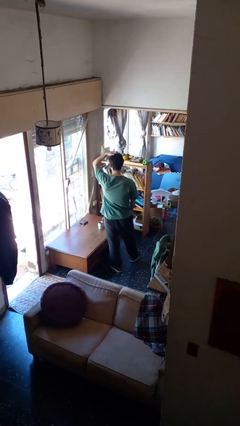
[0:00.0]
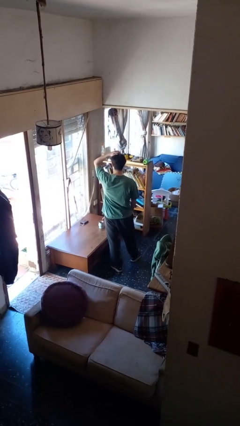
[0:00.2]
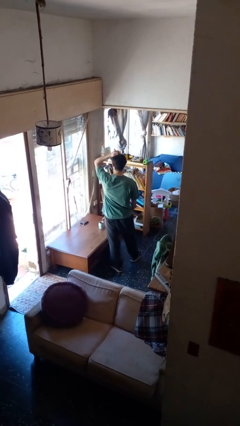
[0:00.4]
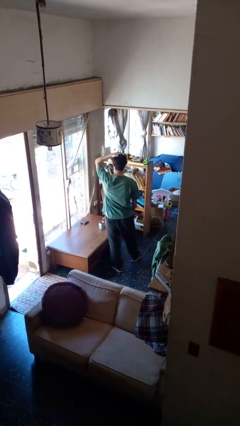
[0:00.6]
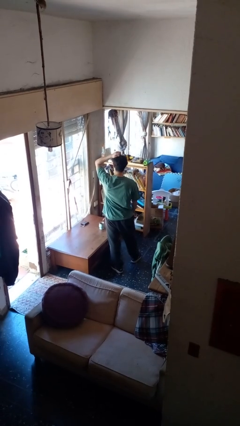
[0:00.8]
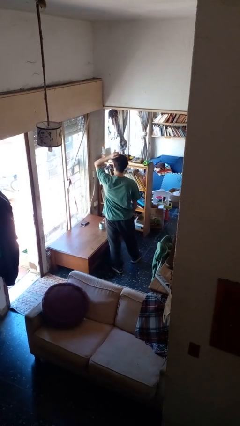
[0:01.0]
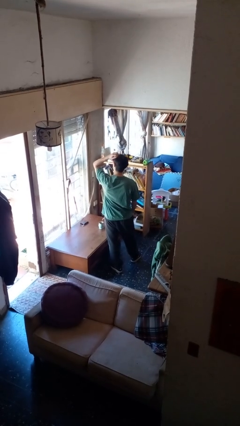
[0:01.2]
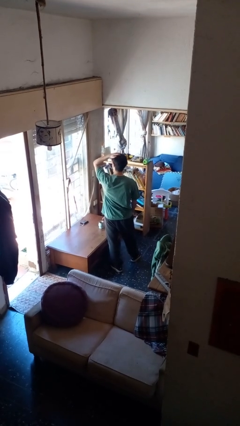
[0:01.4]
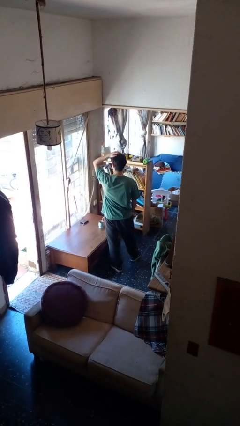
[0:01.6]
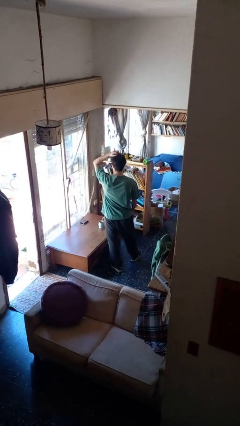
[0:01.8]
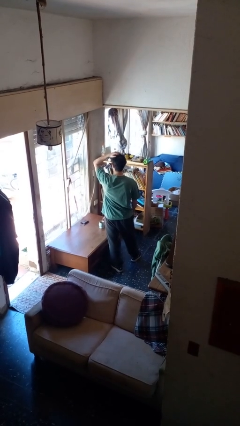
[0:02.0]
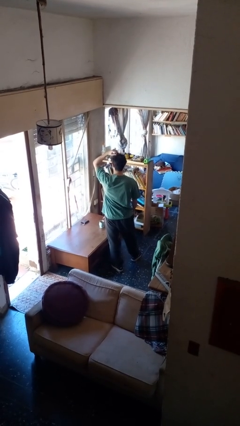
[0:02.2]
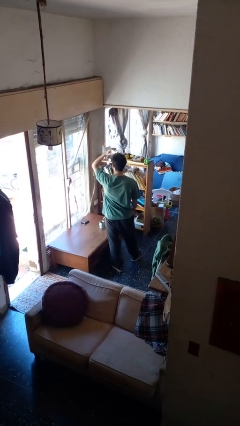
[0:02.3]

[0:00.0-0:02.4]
person pats head

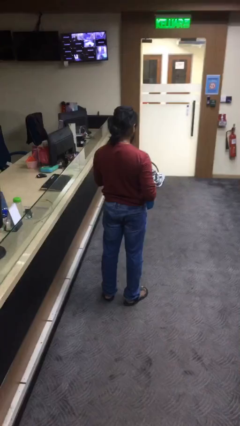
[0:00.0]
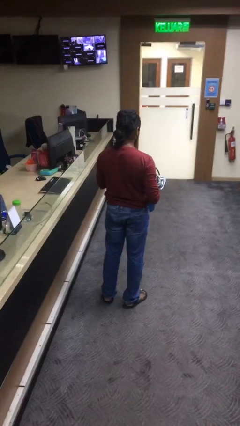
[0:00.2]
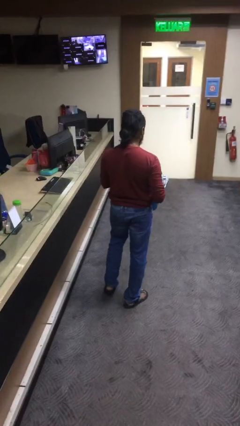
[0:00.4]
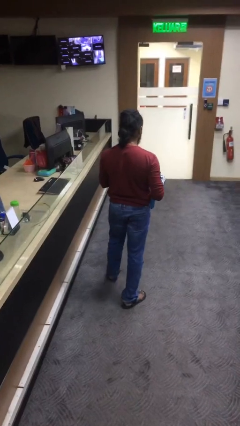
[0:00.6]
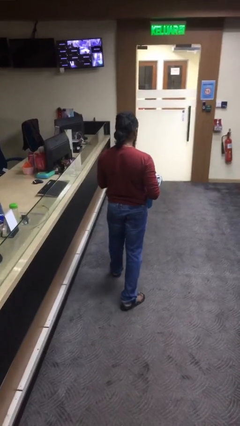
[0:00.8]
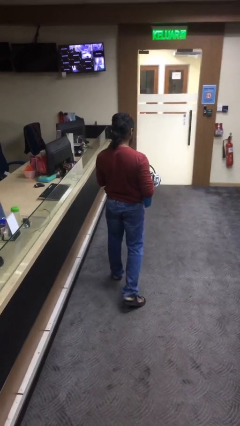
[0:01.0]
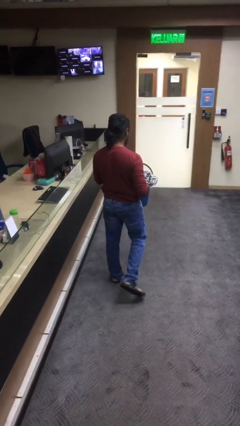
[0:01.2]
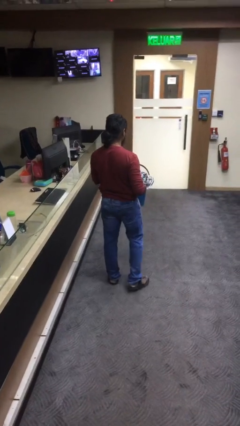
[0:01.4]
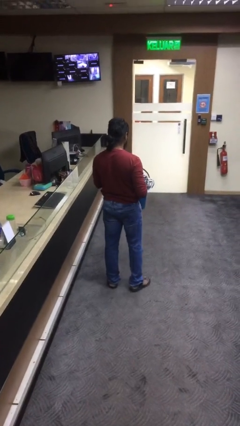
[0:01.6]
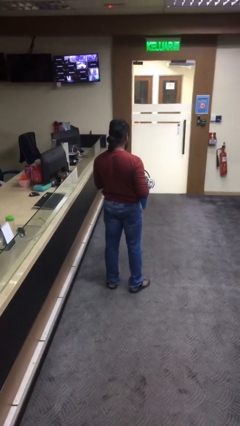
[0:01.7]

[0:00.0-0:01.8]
person carries laundry basket

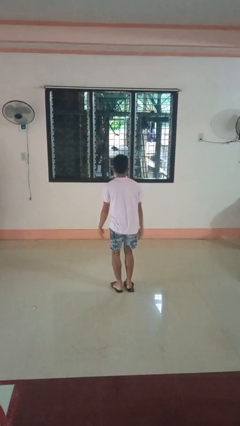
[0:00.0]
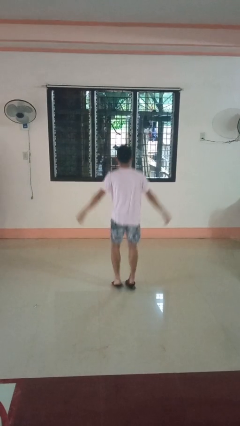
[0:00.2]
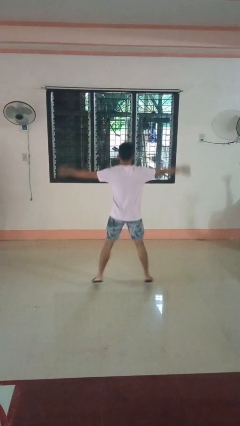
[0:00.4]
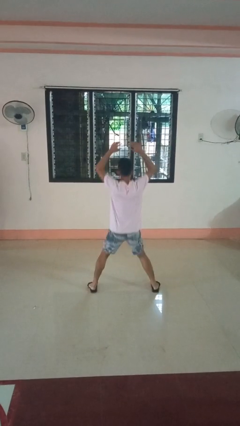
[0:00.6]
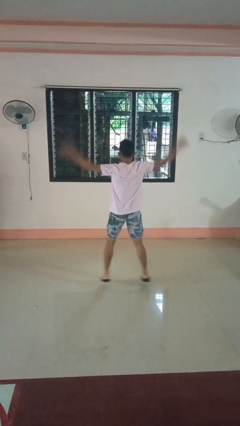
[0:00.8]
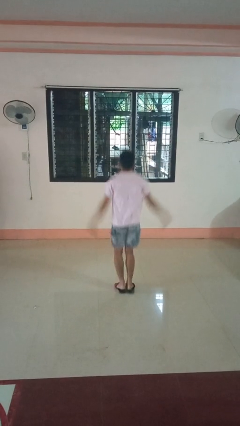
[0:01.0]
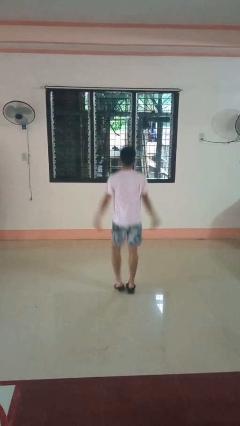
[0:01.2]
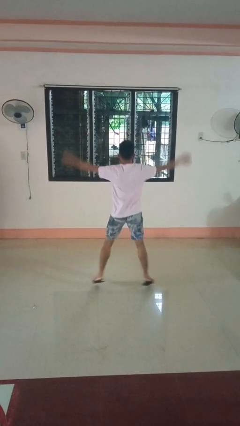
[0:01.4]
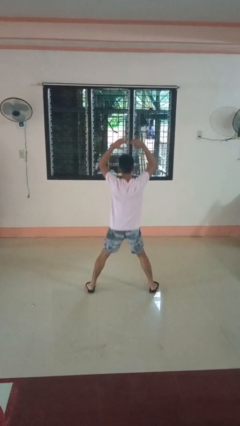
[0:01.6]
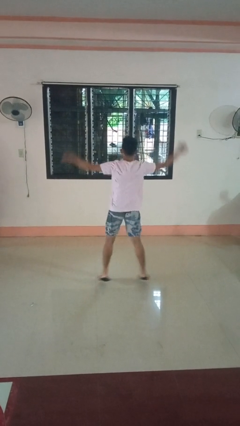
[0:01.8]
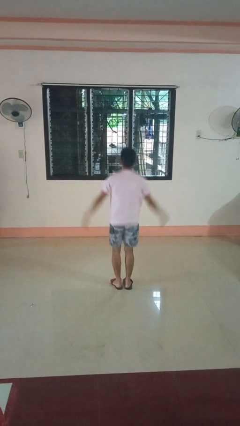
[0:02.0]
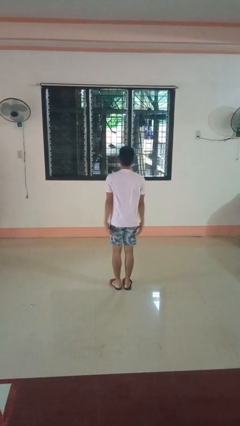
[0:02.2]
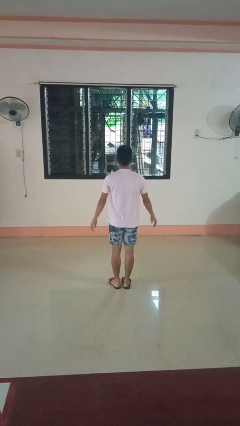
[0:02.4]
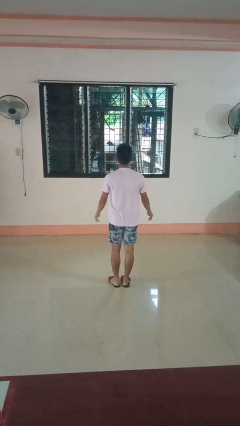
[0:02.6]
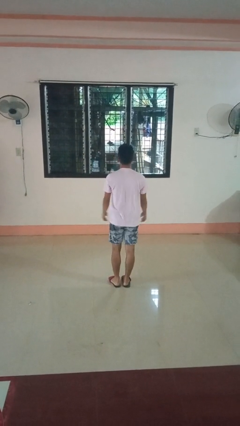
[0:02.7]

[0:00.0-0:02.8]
person exercises with jumping jacks

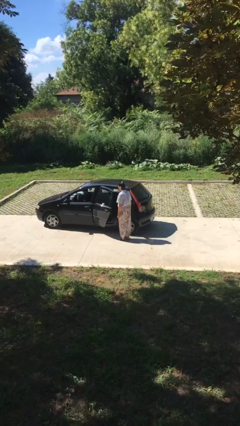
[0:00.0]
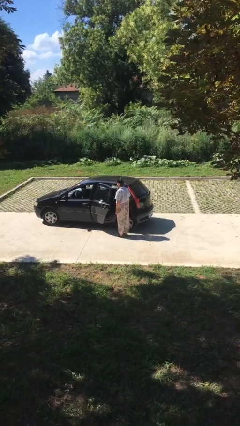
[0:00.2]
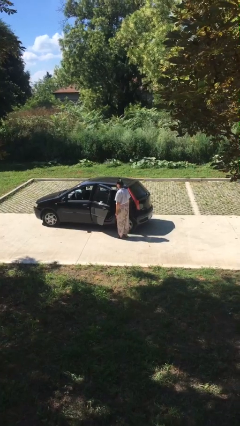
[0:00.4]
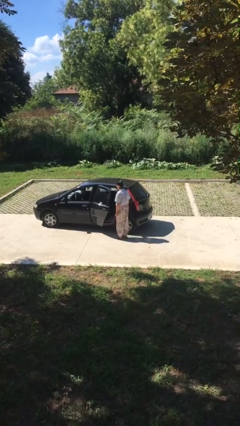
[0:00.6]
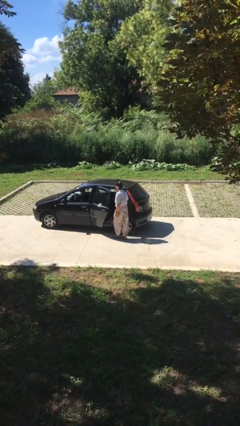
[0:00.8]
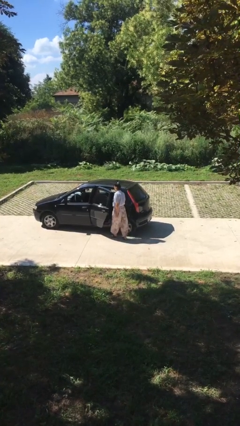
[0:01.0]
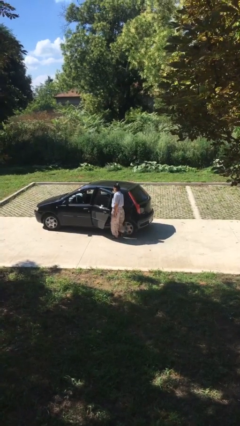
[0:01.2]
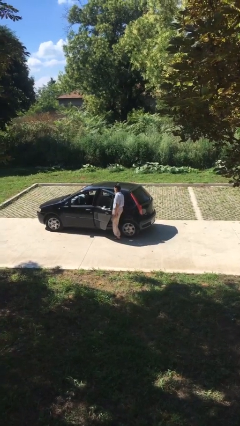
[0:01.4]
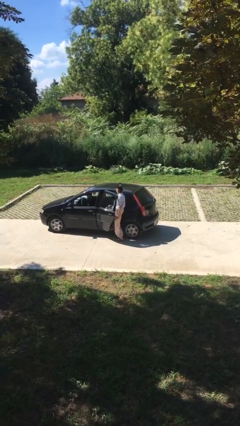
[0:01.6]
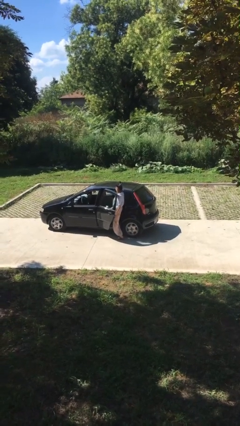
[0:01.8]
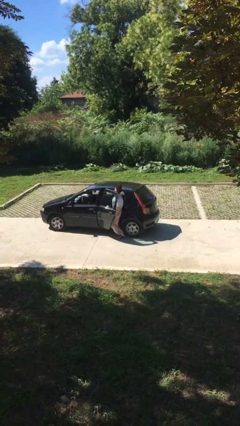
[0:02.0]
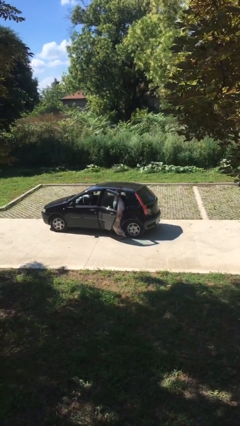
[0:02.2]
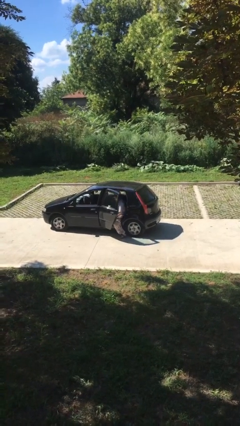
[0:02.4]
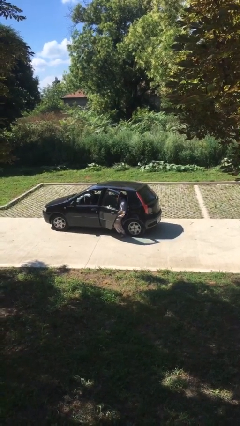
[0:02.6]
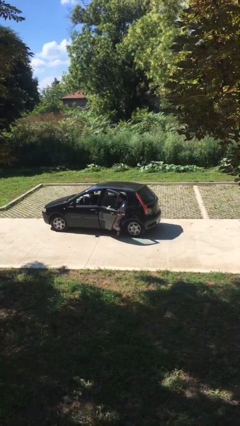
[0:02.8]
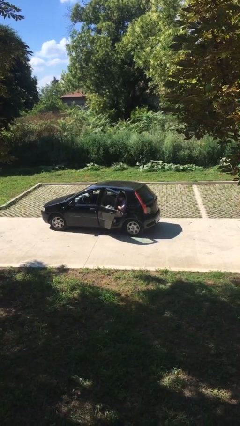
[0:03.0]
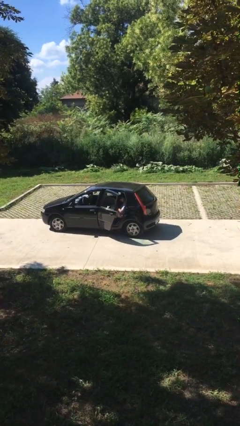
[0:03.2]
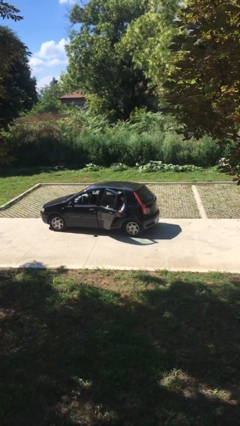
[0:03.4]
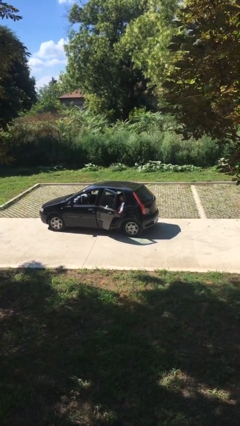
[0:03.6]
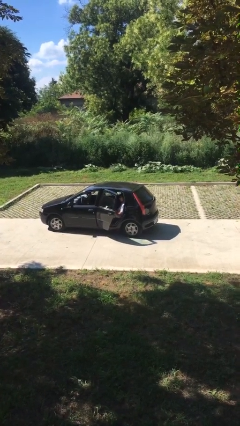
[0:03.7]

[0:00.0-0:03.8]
person enters car

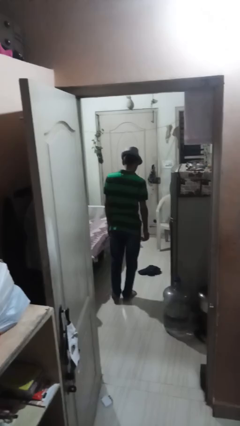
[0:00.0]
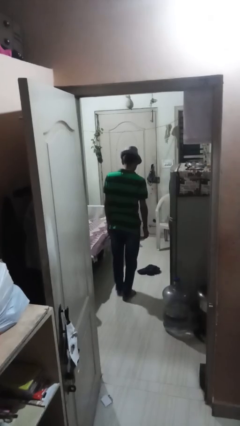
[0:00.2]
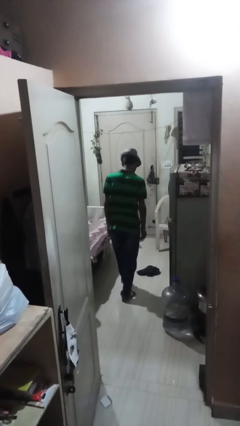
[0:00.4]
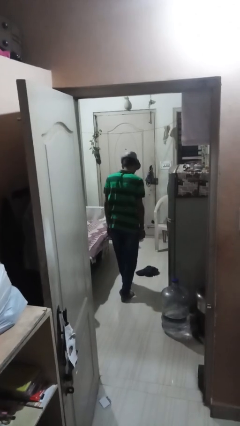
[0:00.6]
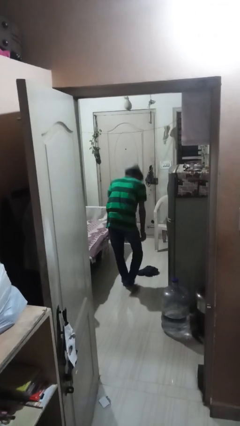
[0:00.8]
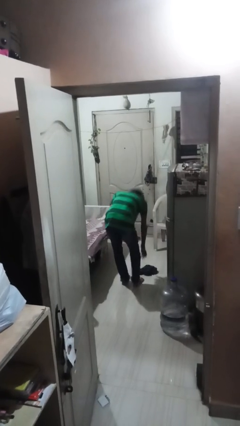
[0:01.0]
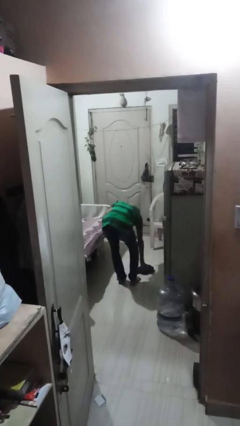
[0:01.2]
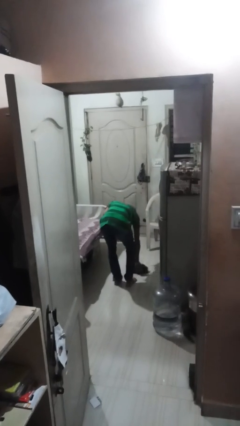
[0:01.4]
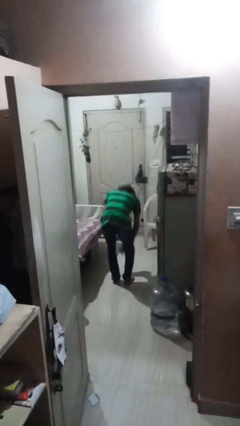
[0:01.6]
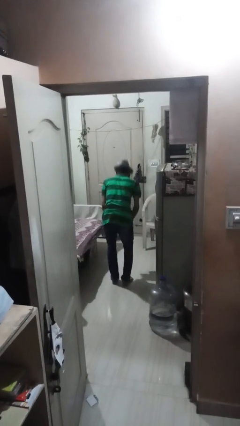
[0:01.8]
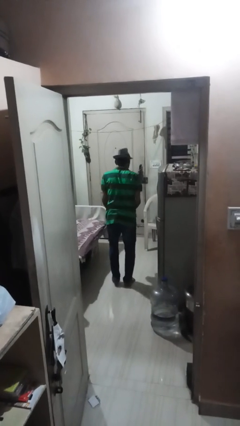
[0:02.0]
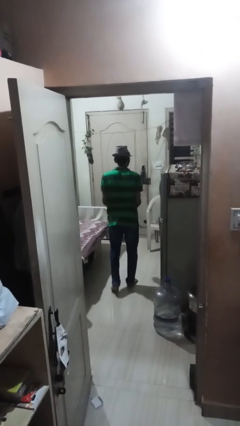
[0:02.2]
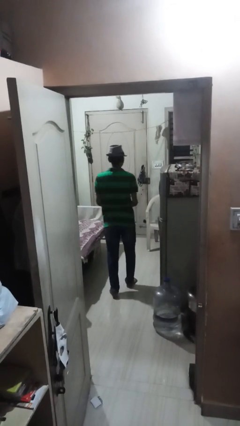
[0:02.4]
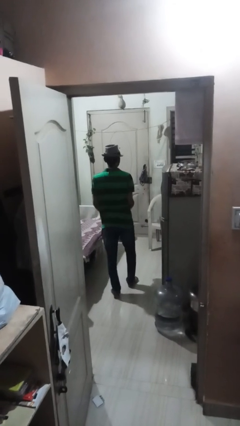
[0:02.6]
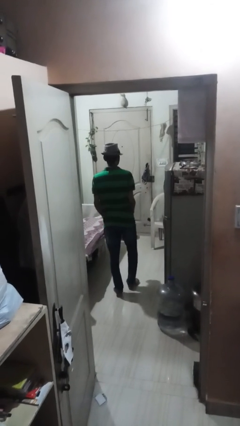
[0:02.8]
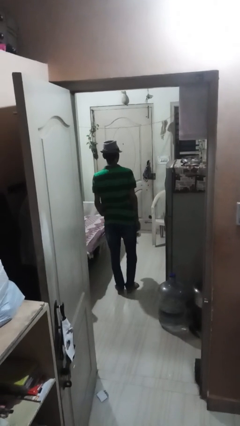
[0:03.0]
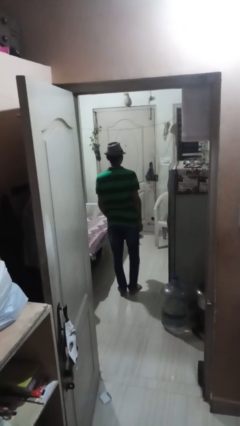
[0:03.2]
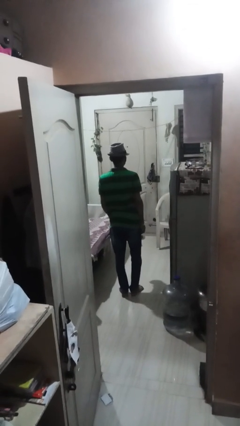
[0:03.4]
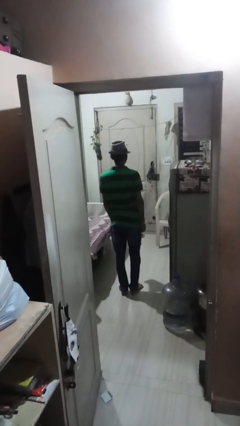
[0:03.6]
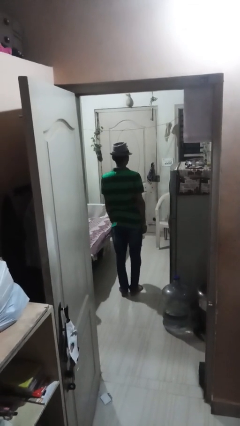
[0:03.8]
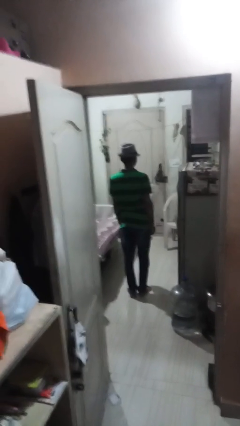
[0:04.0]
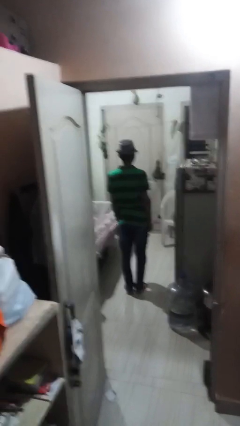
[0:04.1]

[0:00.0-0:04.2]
person picks up object from floor

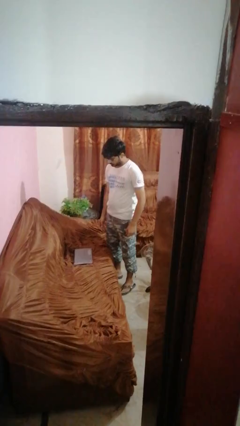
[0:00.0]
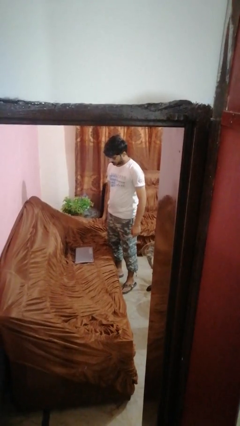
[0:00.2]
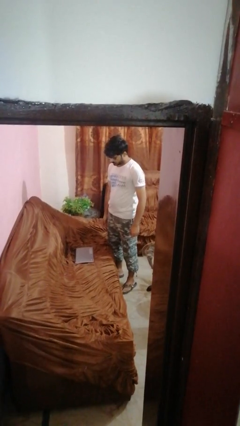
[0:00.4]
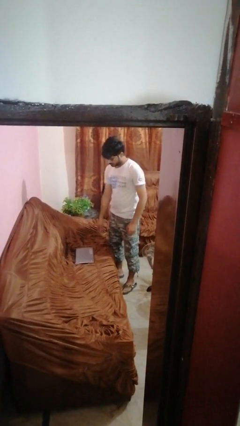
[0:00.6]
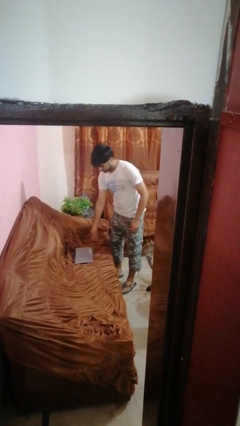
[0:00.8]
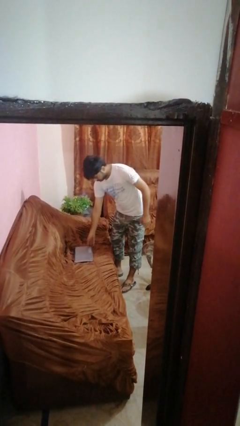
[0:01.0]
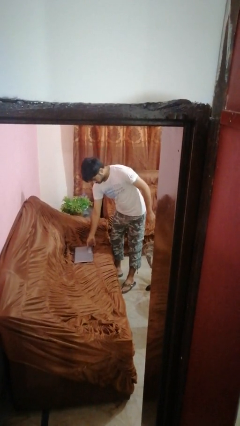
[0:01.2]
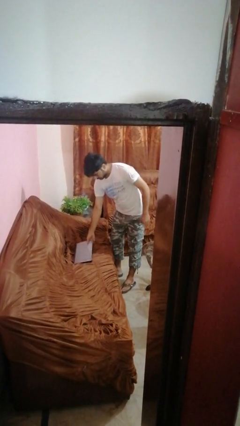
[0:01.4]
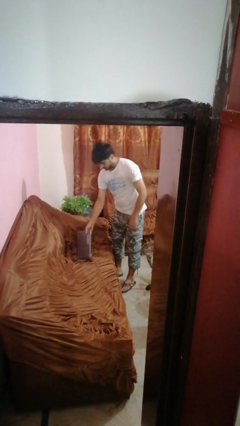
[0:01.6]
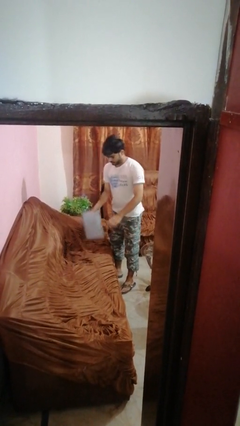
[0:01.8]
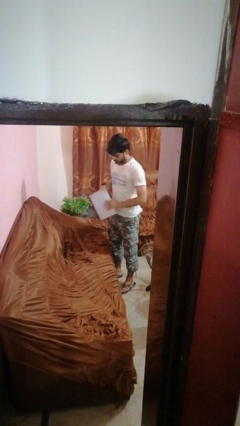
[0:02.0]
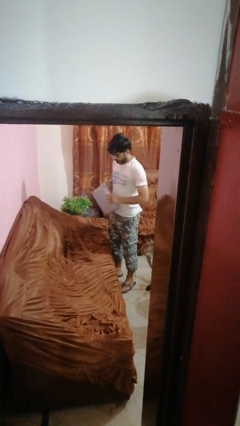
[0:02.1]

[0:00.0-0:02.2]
person picks up object from couch
